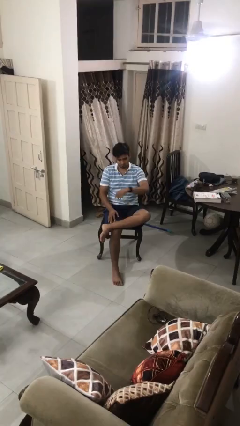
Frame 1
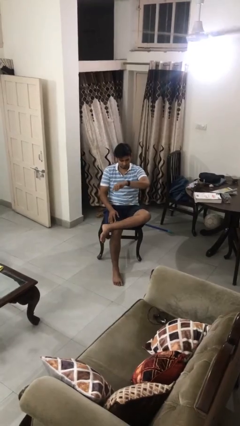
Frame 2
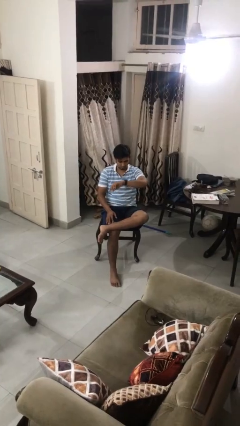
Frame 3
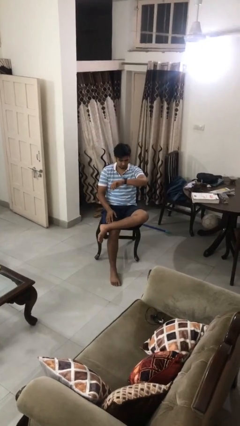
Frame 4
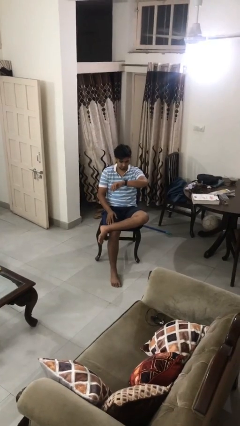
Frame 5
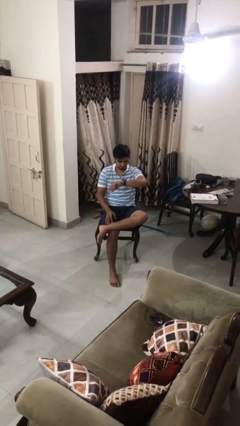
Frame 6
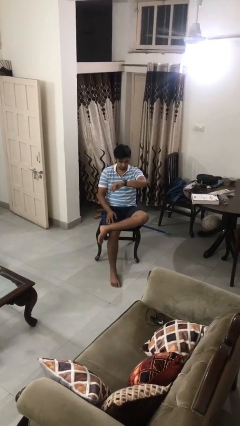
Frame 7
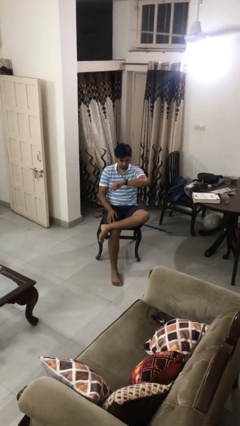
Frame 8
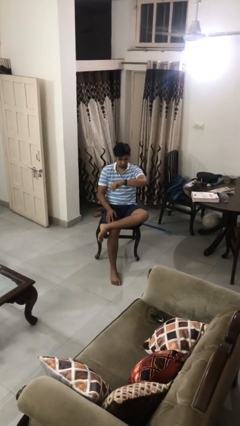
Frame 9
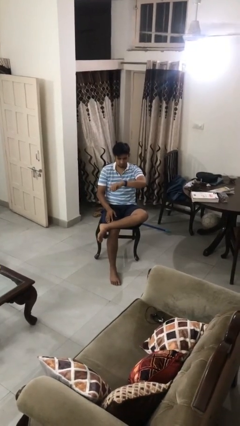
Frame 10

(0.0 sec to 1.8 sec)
person looks at wristwatch

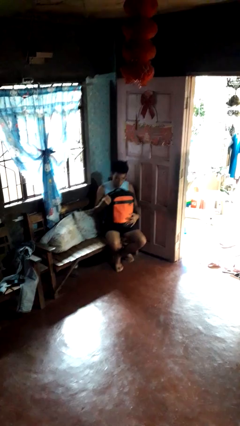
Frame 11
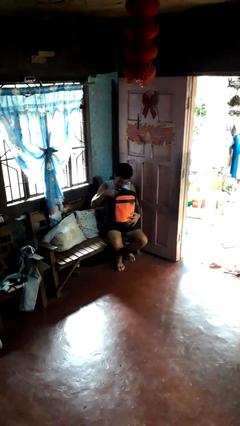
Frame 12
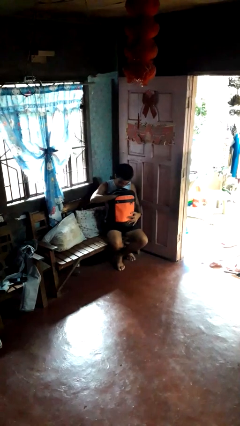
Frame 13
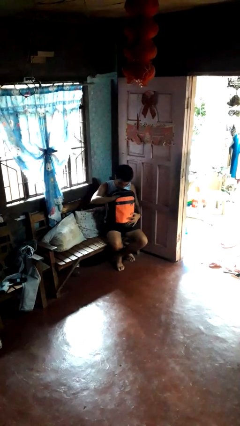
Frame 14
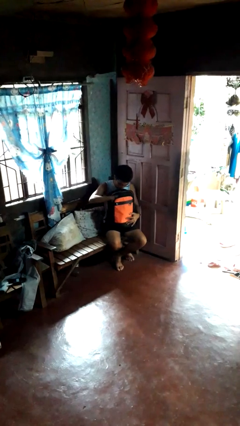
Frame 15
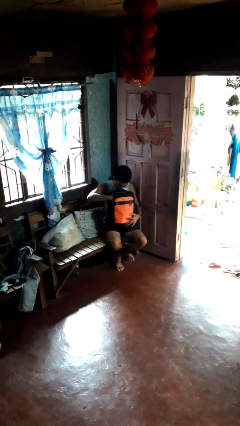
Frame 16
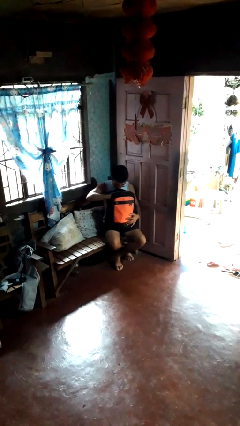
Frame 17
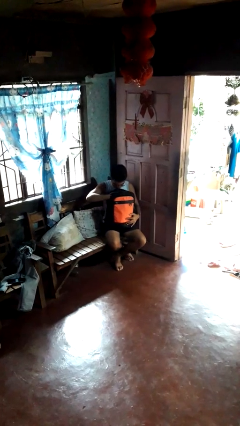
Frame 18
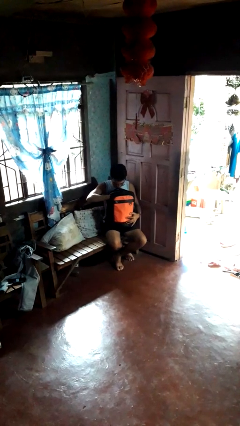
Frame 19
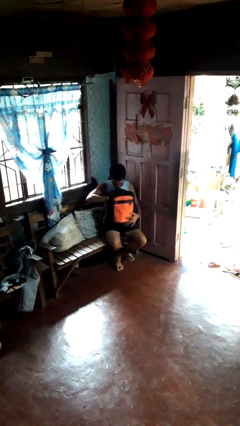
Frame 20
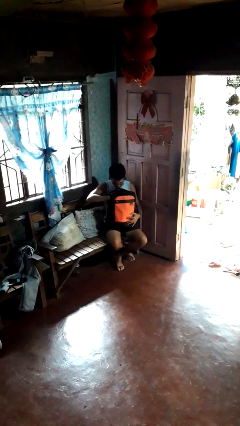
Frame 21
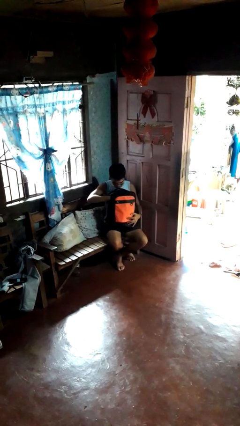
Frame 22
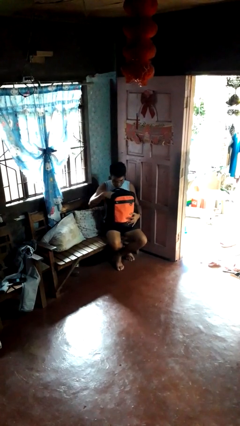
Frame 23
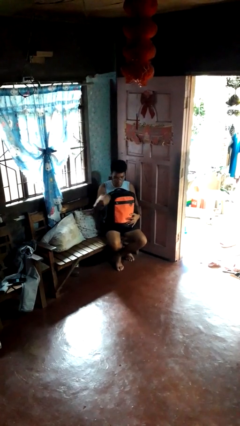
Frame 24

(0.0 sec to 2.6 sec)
person searches in bag

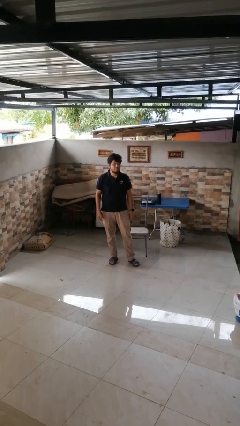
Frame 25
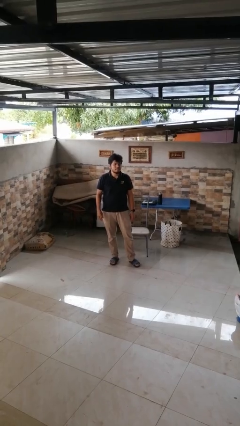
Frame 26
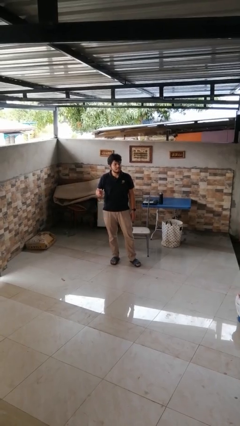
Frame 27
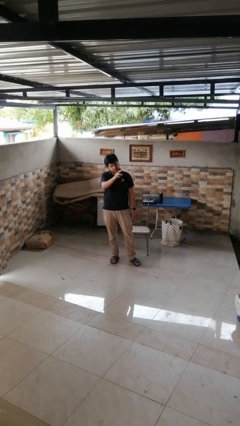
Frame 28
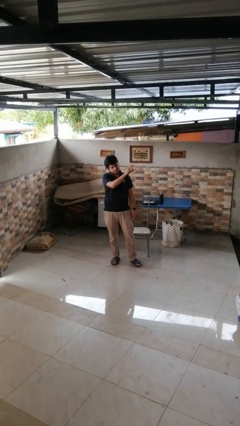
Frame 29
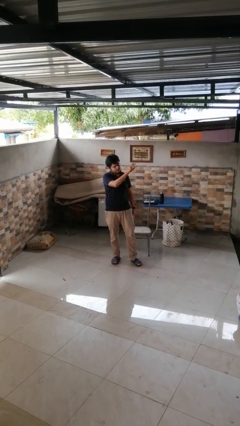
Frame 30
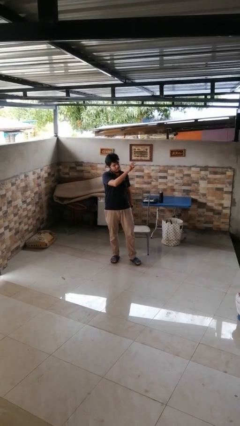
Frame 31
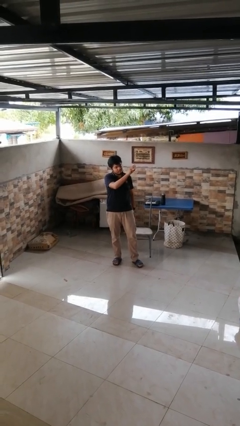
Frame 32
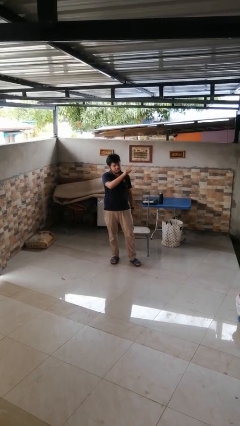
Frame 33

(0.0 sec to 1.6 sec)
person gestures swipe left

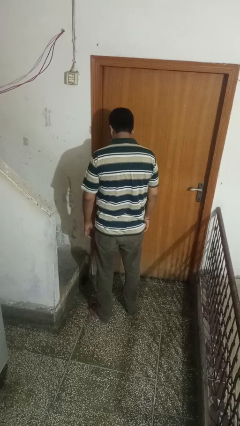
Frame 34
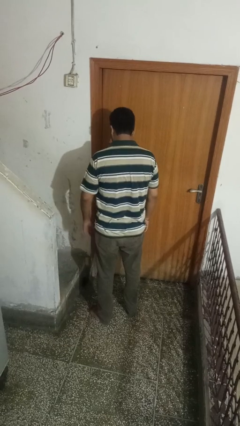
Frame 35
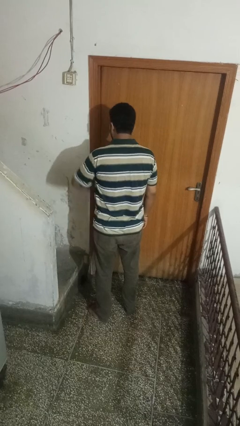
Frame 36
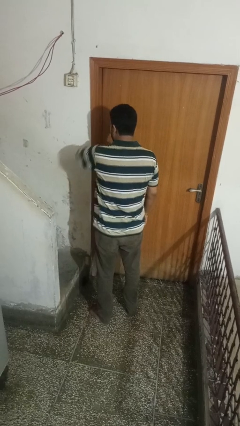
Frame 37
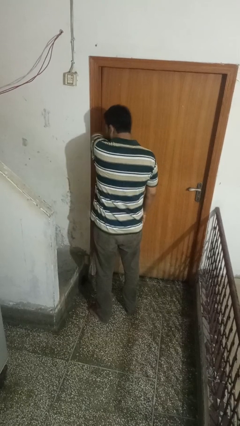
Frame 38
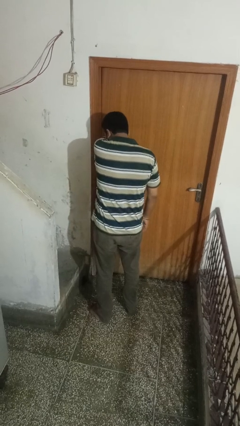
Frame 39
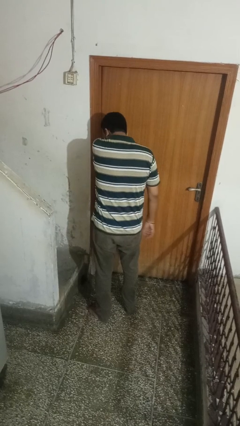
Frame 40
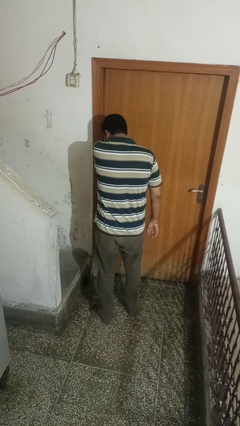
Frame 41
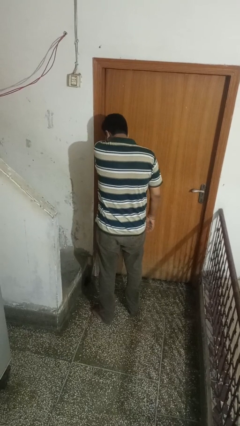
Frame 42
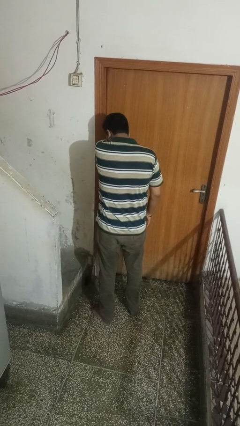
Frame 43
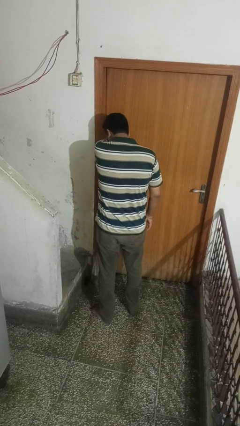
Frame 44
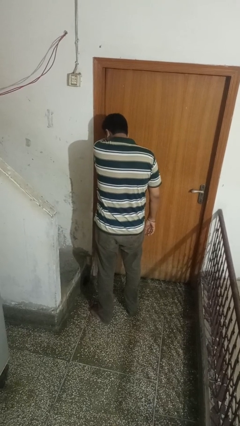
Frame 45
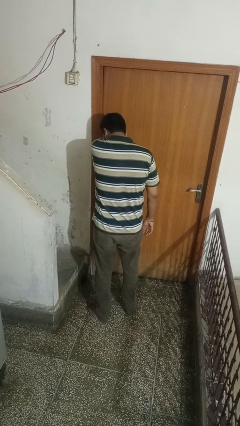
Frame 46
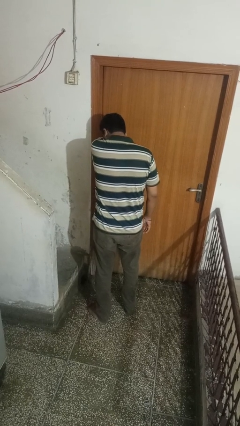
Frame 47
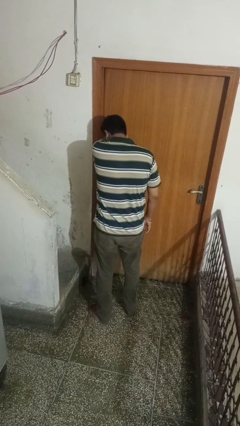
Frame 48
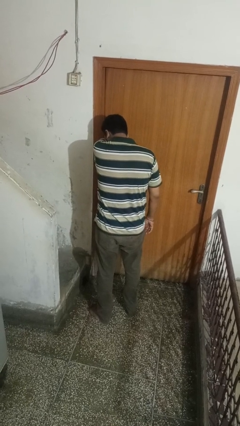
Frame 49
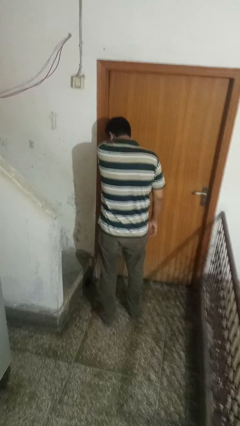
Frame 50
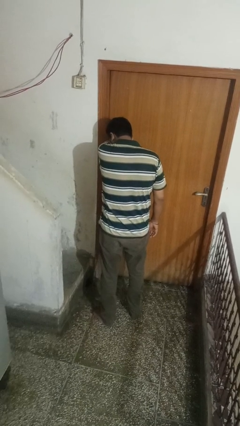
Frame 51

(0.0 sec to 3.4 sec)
person sneezes into arm

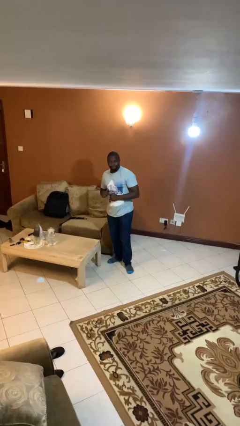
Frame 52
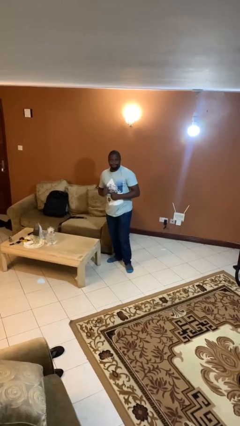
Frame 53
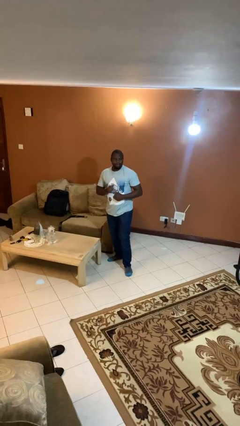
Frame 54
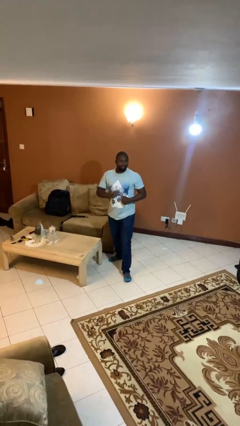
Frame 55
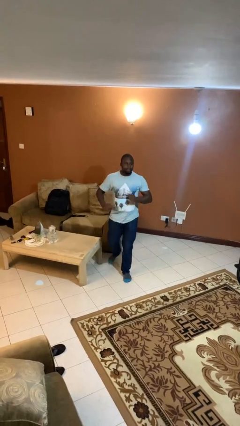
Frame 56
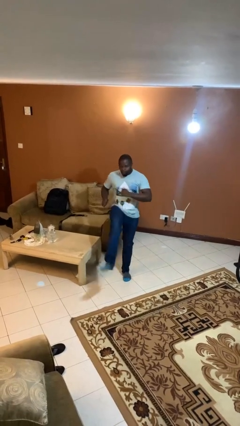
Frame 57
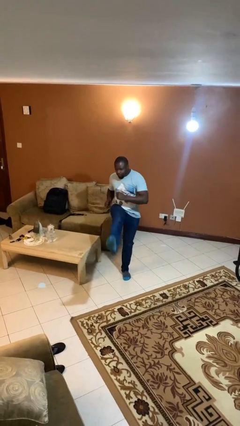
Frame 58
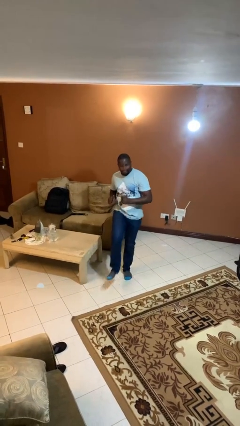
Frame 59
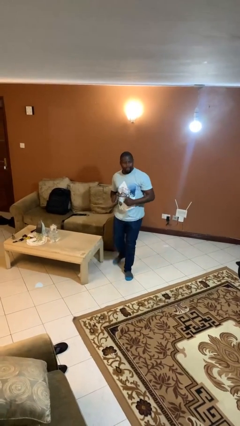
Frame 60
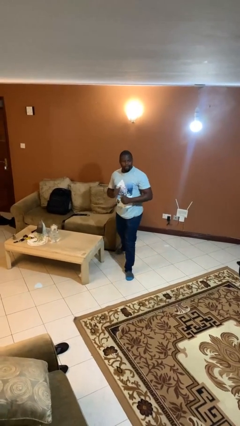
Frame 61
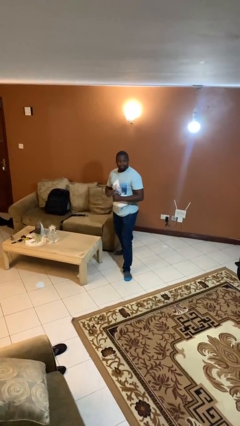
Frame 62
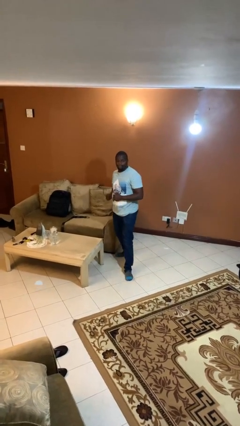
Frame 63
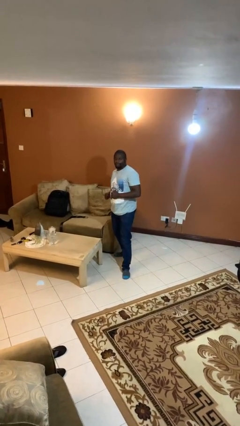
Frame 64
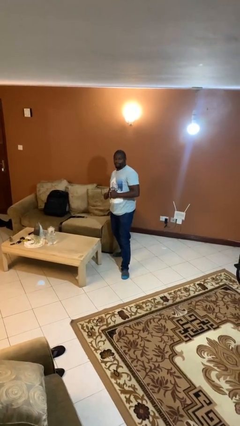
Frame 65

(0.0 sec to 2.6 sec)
person karate kicks

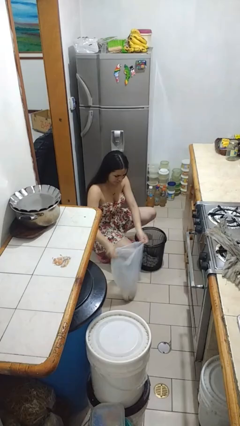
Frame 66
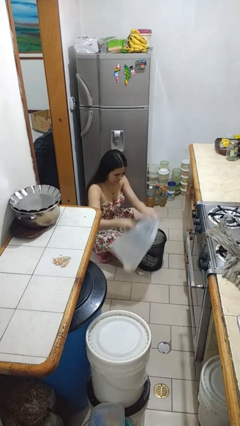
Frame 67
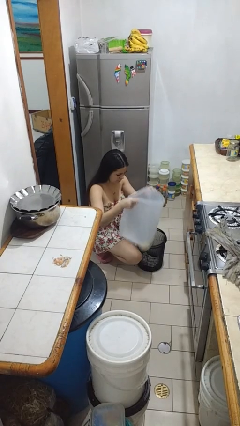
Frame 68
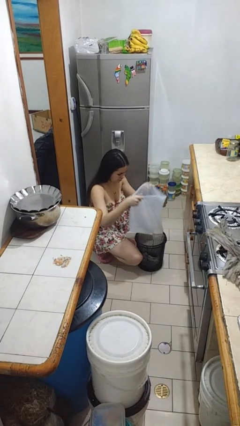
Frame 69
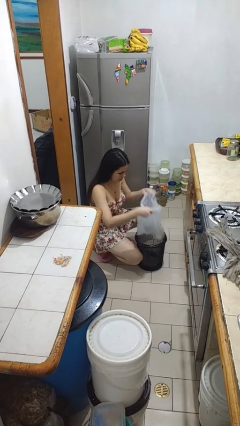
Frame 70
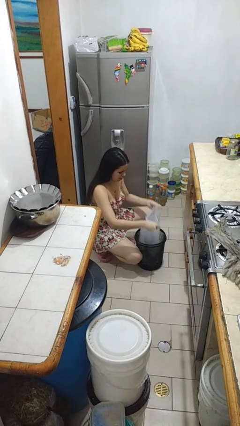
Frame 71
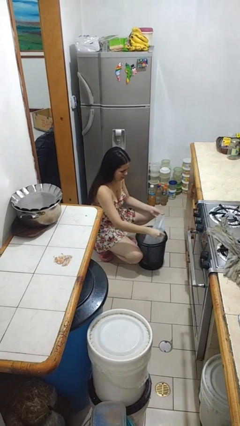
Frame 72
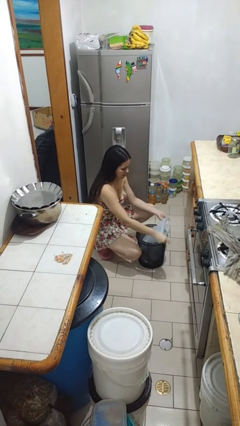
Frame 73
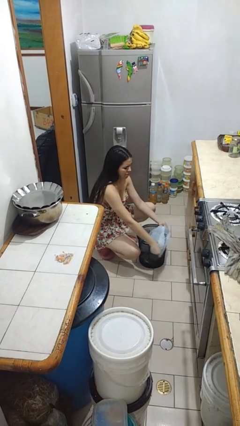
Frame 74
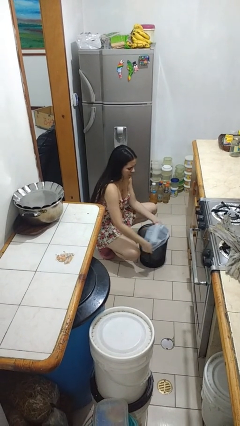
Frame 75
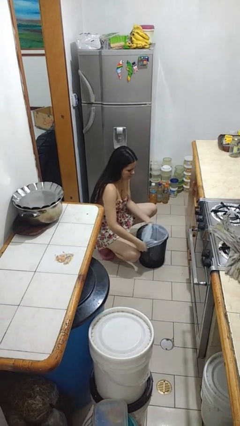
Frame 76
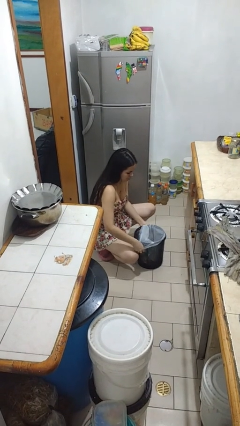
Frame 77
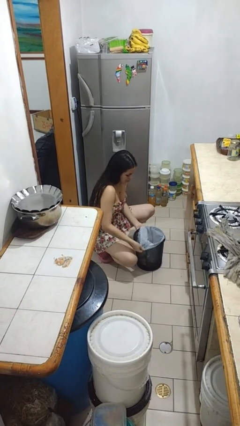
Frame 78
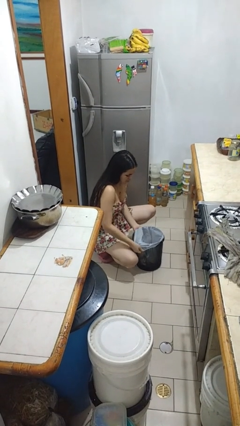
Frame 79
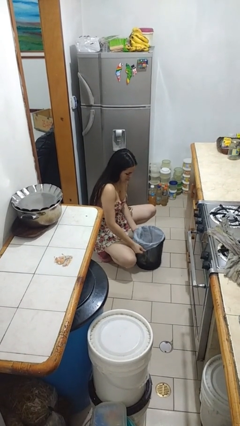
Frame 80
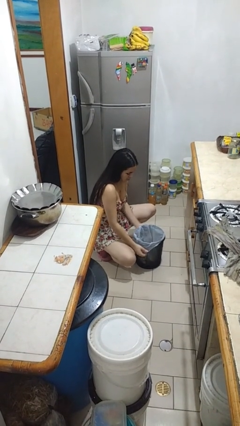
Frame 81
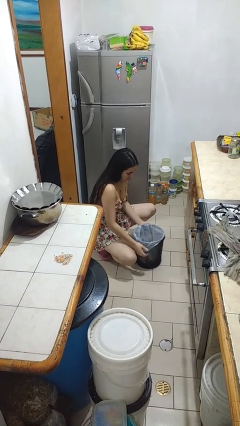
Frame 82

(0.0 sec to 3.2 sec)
person inserts trashbag into trashcan

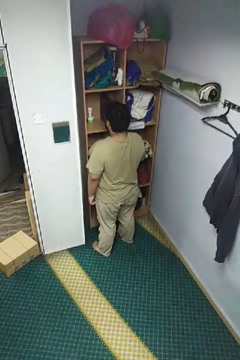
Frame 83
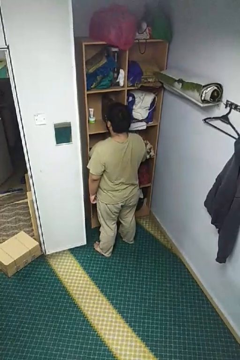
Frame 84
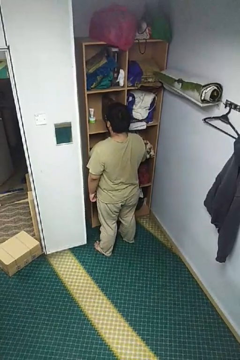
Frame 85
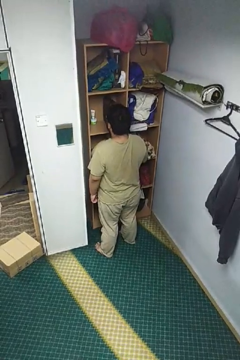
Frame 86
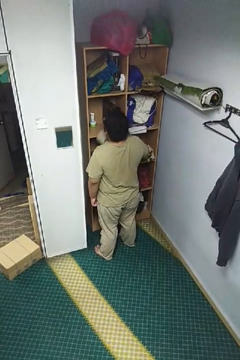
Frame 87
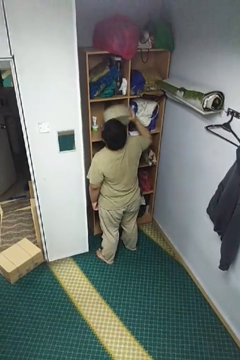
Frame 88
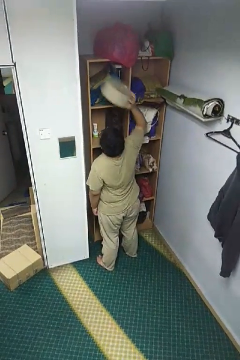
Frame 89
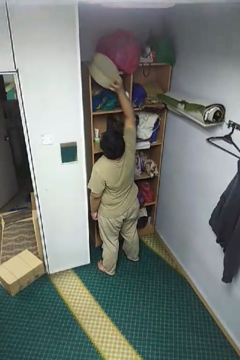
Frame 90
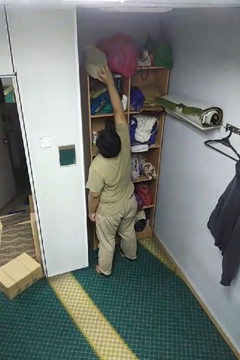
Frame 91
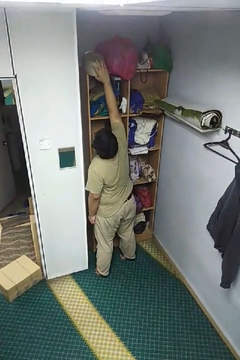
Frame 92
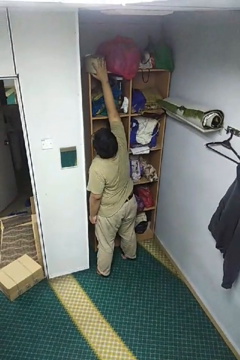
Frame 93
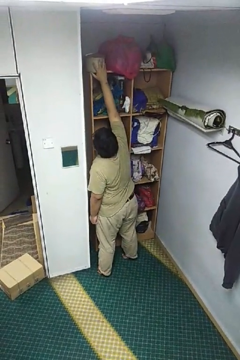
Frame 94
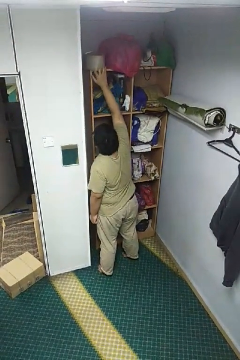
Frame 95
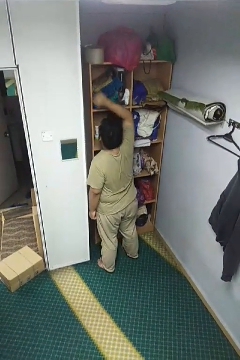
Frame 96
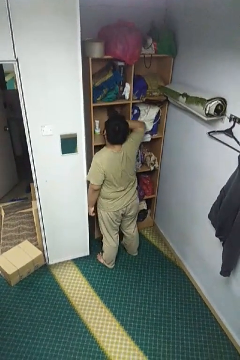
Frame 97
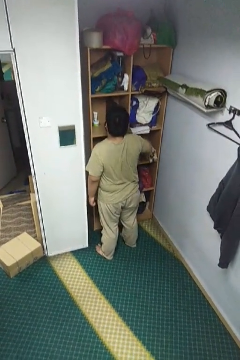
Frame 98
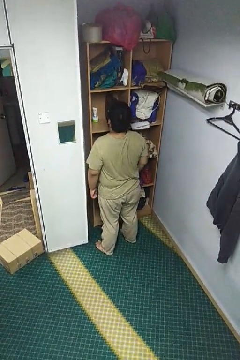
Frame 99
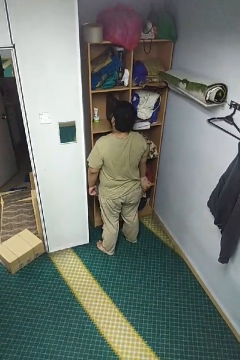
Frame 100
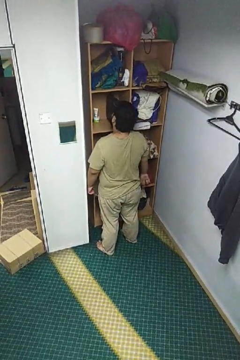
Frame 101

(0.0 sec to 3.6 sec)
person puts down object on shelf
